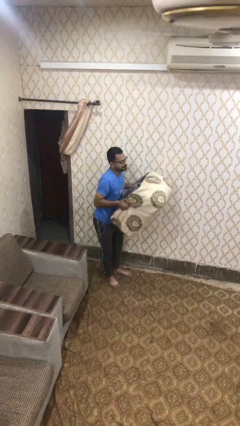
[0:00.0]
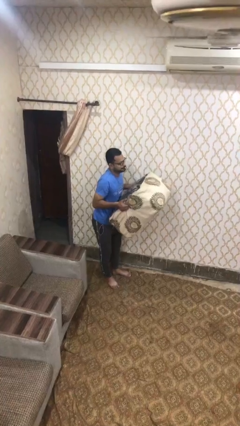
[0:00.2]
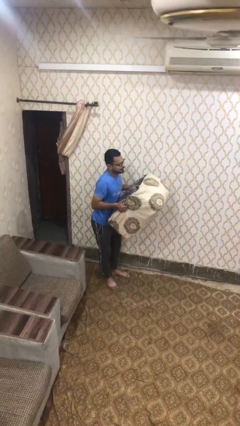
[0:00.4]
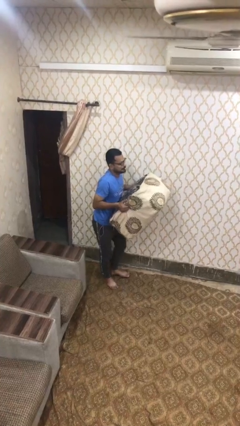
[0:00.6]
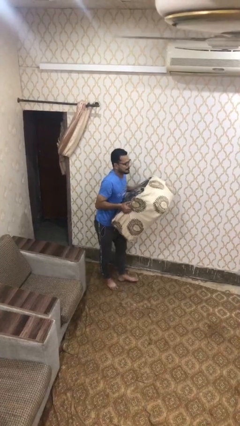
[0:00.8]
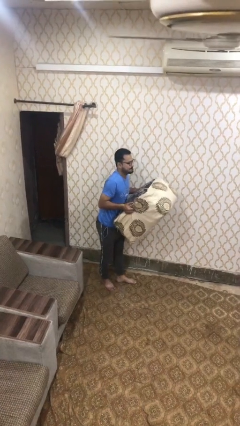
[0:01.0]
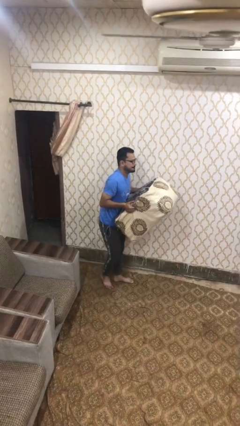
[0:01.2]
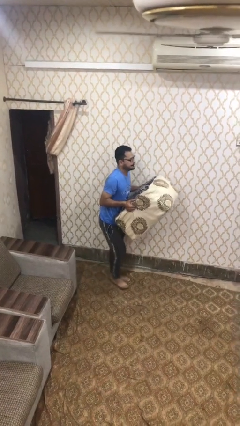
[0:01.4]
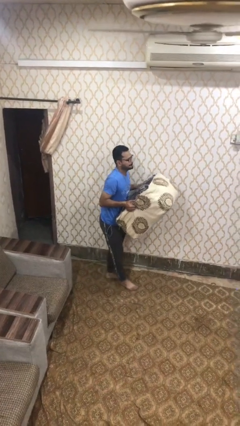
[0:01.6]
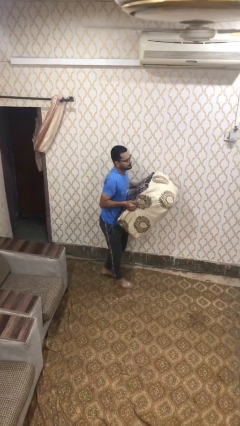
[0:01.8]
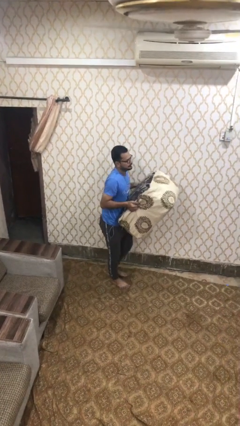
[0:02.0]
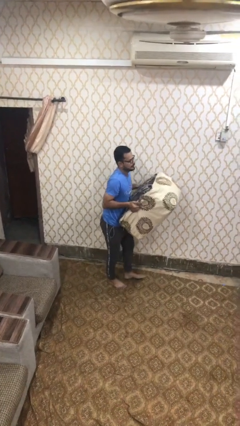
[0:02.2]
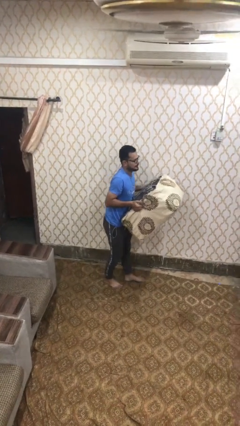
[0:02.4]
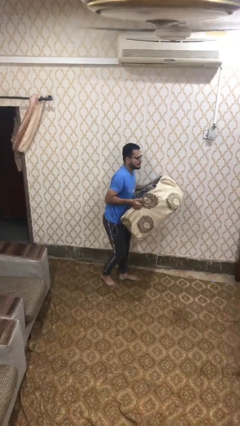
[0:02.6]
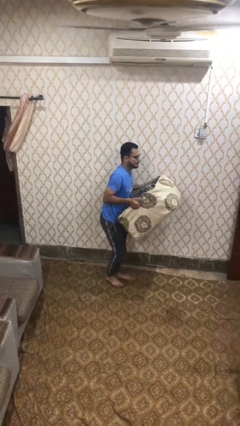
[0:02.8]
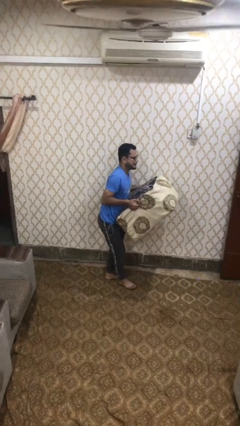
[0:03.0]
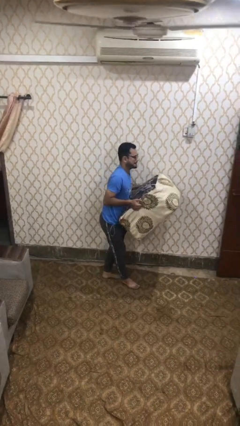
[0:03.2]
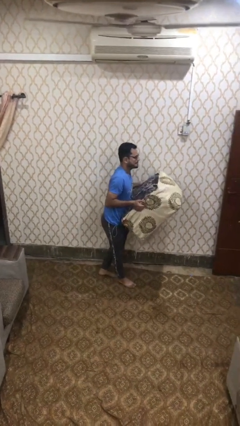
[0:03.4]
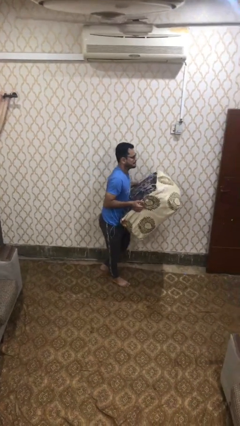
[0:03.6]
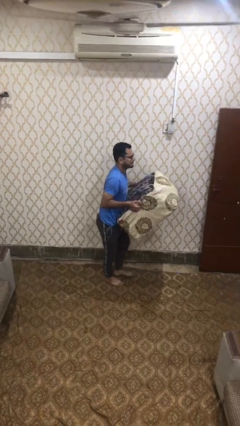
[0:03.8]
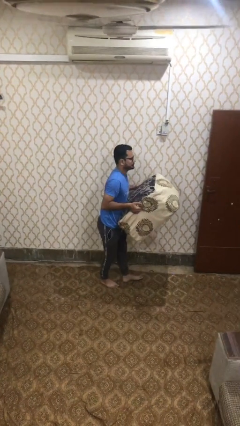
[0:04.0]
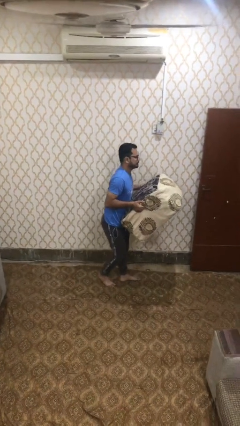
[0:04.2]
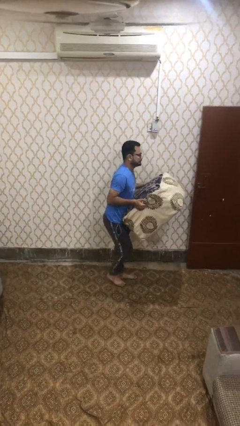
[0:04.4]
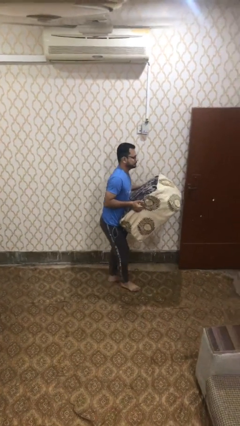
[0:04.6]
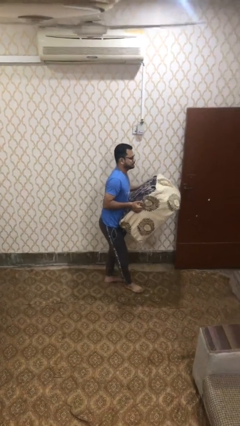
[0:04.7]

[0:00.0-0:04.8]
person carries heavy object

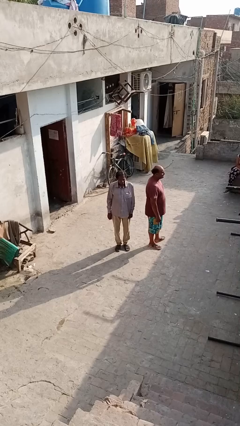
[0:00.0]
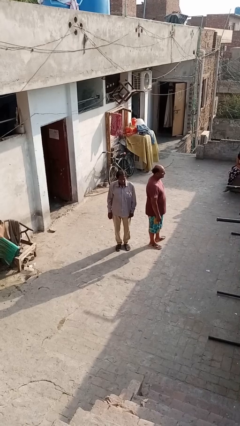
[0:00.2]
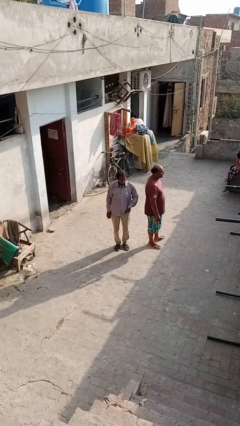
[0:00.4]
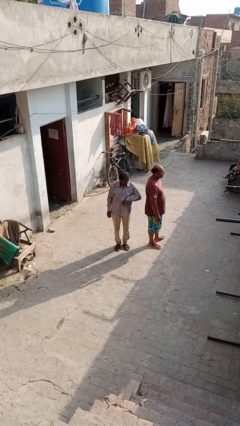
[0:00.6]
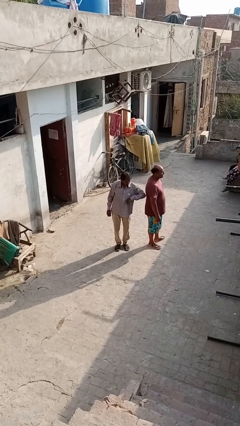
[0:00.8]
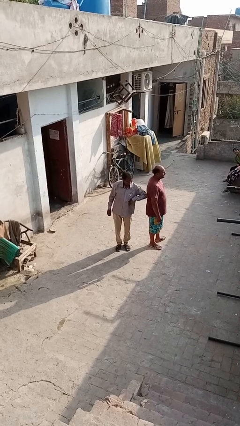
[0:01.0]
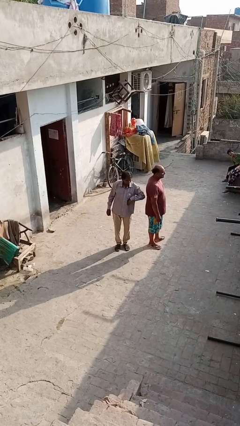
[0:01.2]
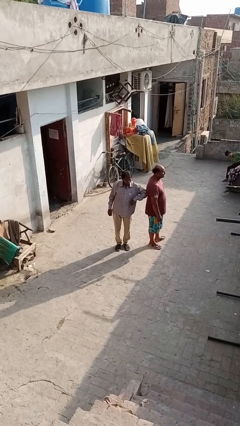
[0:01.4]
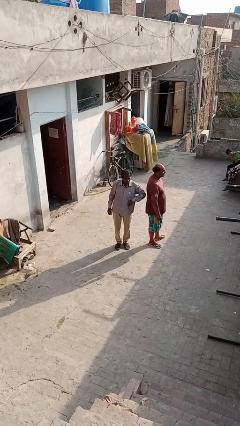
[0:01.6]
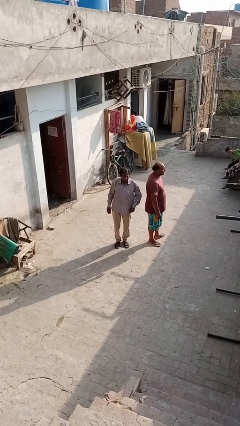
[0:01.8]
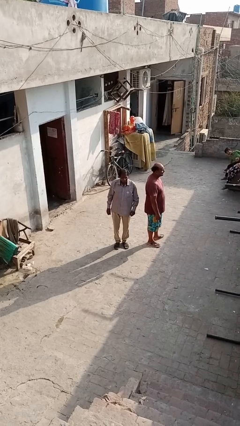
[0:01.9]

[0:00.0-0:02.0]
person nudges person with elbow

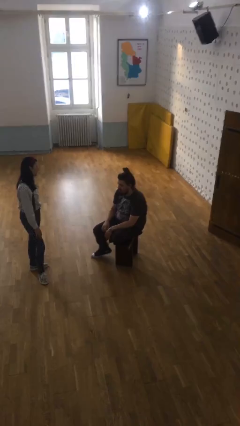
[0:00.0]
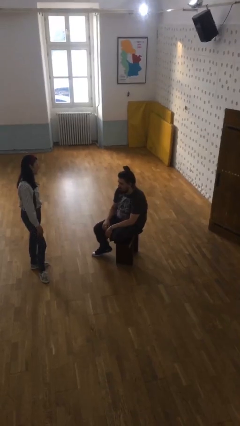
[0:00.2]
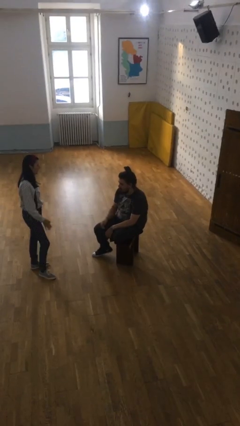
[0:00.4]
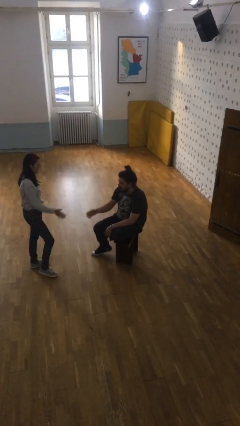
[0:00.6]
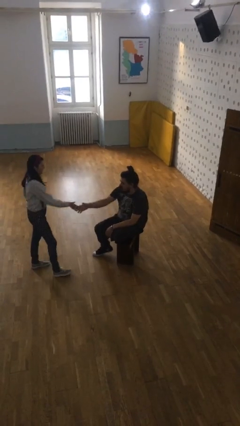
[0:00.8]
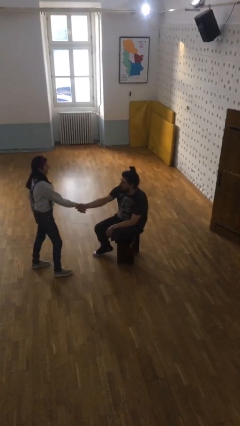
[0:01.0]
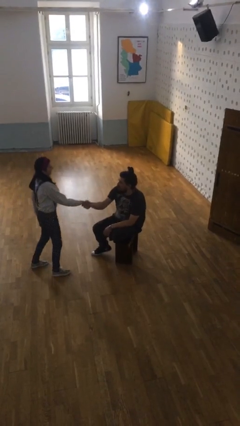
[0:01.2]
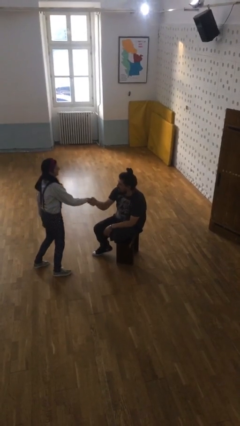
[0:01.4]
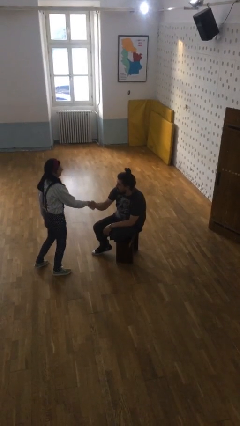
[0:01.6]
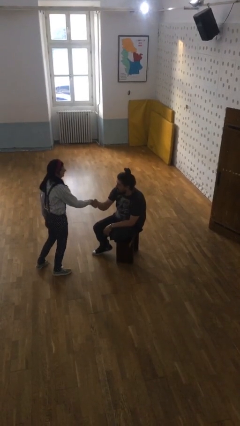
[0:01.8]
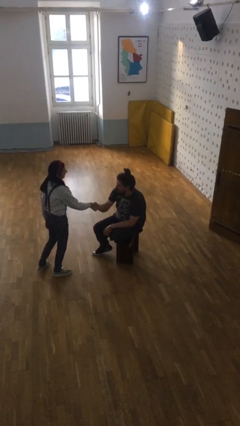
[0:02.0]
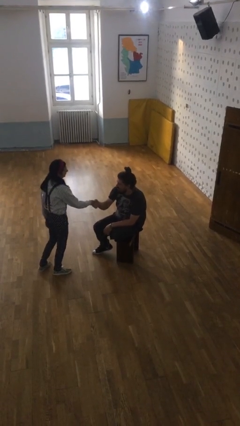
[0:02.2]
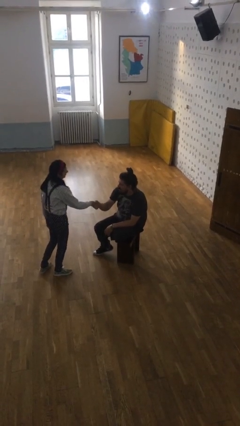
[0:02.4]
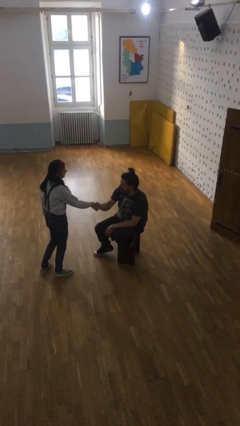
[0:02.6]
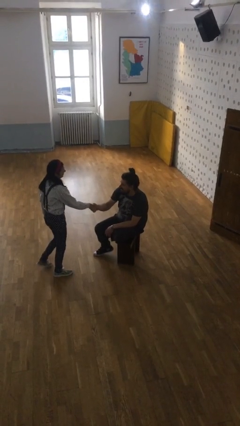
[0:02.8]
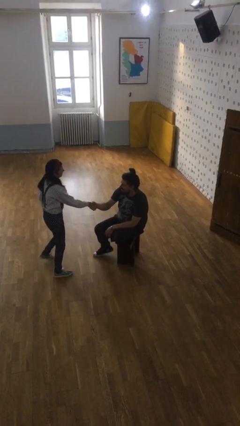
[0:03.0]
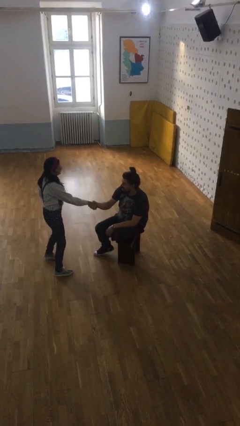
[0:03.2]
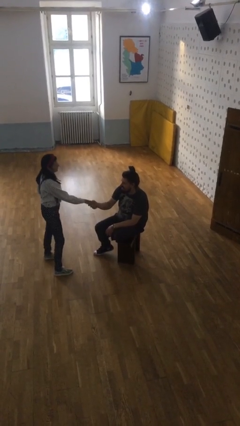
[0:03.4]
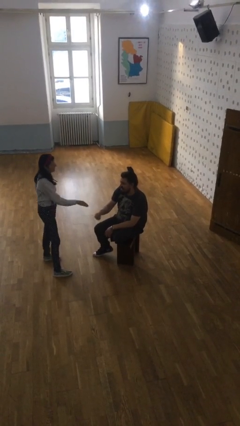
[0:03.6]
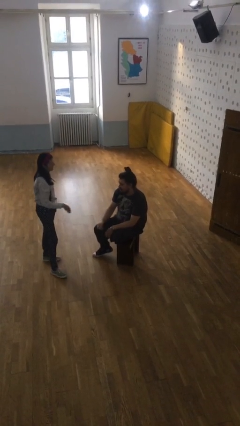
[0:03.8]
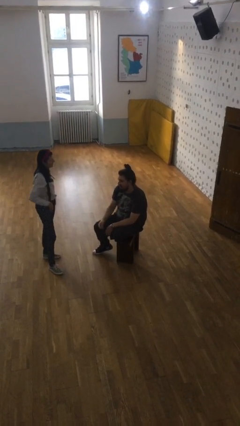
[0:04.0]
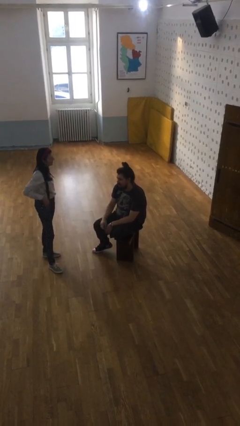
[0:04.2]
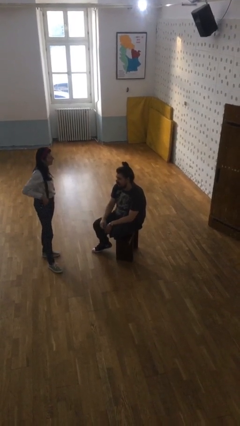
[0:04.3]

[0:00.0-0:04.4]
person shakes hand

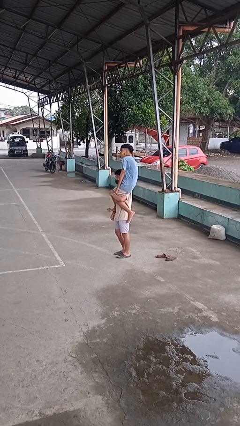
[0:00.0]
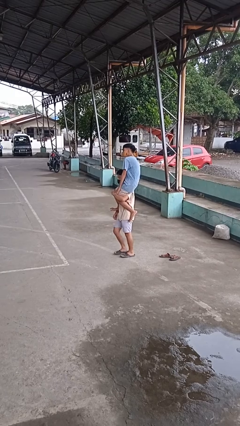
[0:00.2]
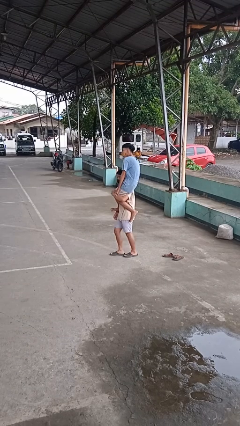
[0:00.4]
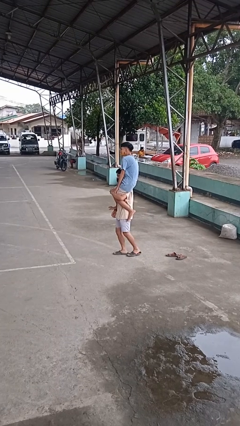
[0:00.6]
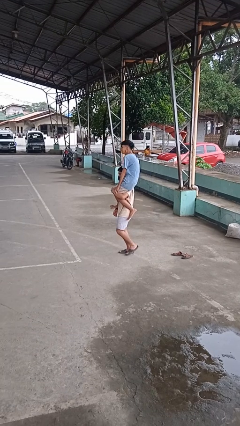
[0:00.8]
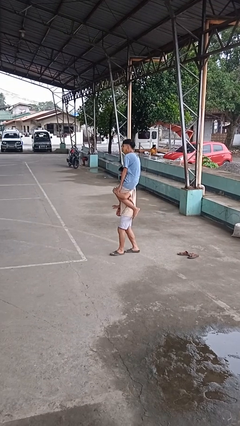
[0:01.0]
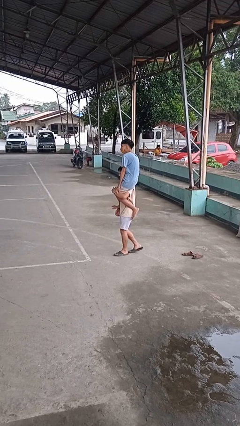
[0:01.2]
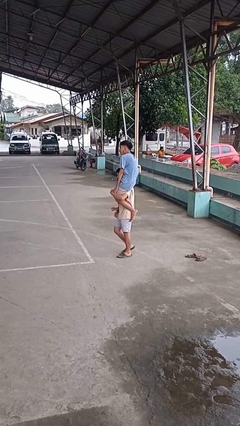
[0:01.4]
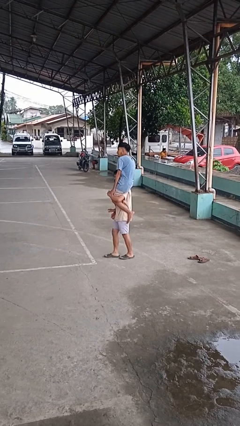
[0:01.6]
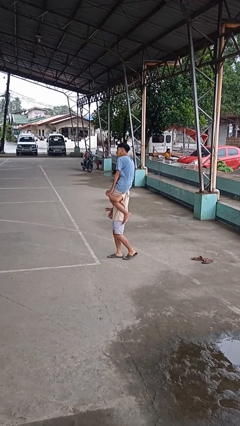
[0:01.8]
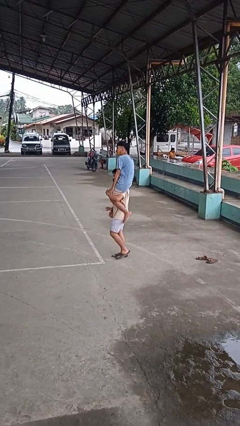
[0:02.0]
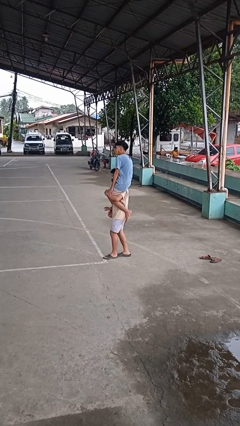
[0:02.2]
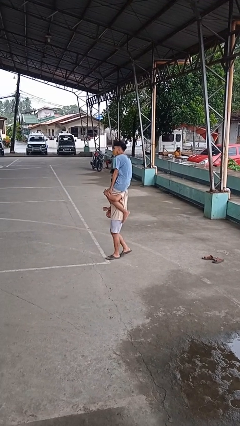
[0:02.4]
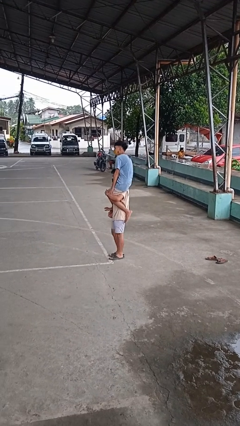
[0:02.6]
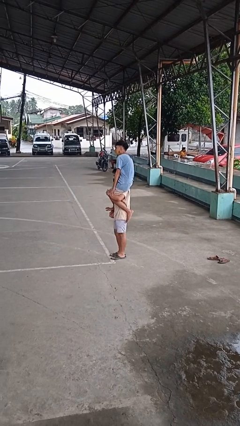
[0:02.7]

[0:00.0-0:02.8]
person carries person on shoulders

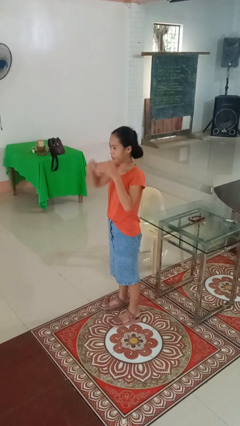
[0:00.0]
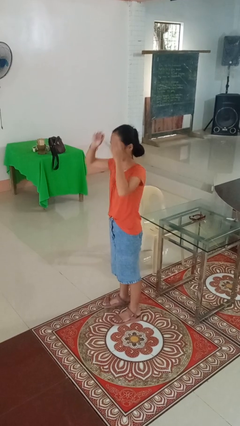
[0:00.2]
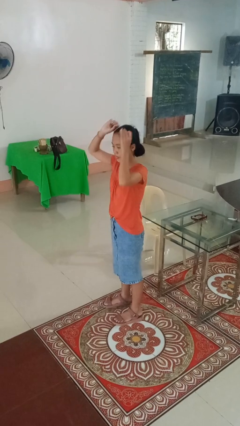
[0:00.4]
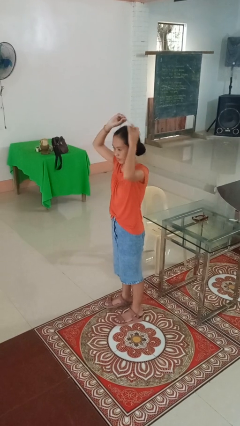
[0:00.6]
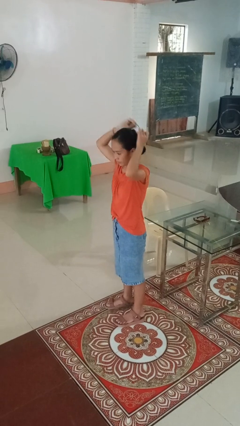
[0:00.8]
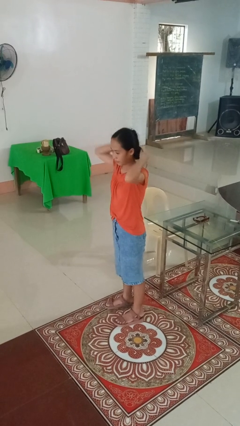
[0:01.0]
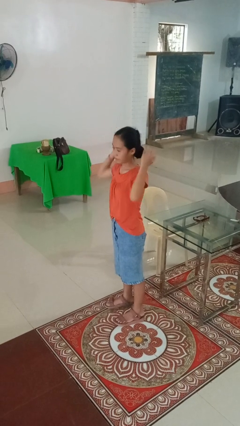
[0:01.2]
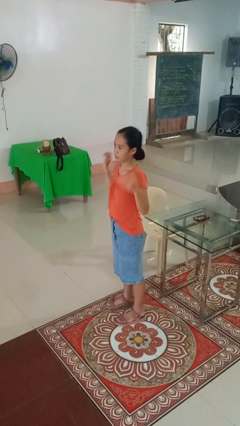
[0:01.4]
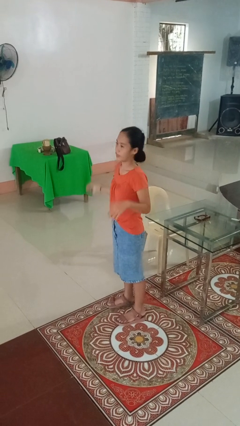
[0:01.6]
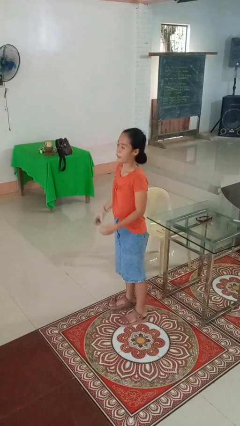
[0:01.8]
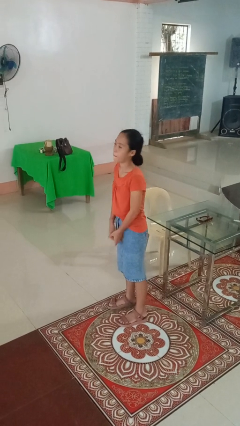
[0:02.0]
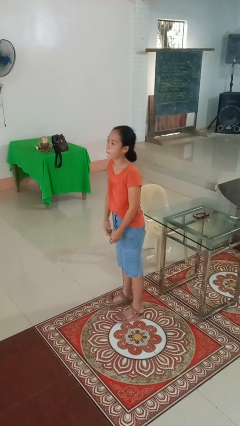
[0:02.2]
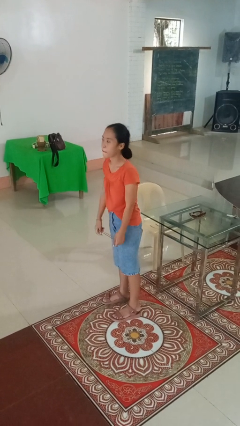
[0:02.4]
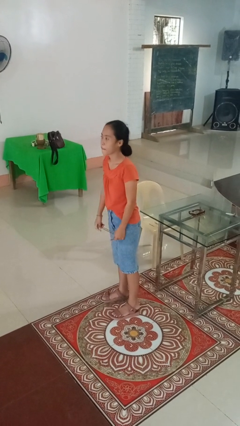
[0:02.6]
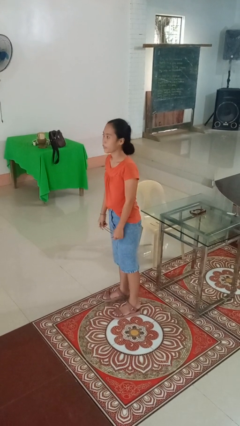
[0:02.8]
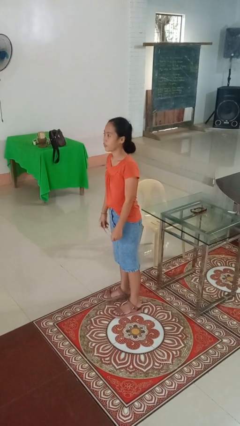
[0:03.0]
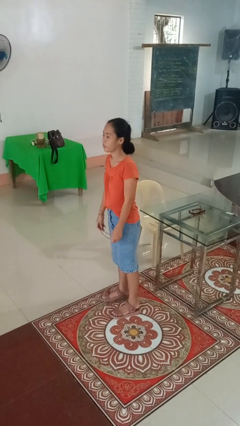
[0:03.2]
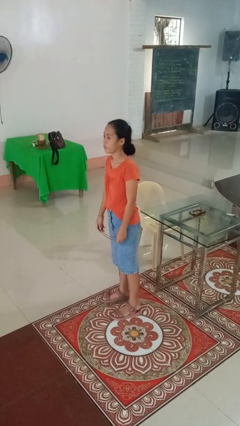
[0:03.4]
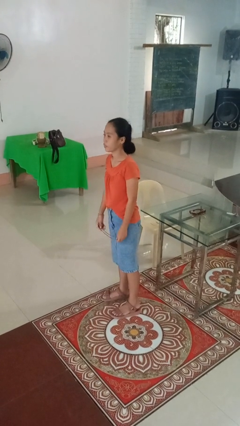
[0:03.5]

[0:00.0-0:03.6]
person takes off necklace
